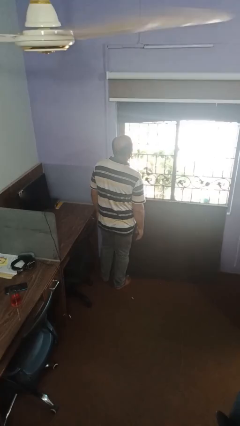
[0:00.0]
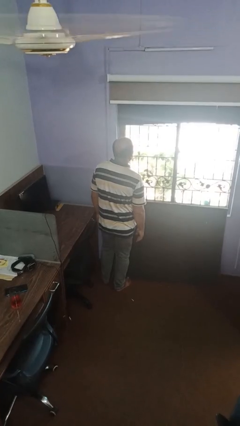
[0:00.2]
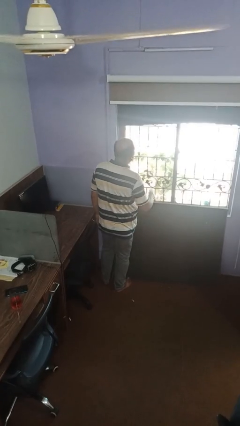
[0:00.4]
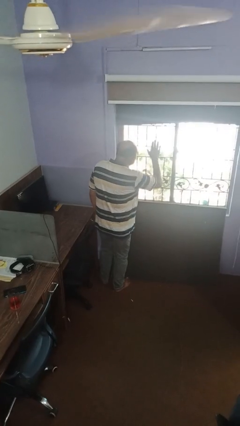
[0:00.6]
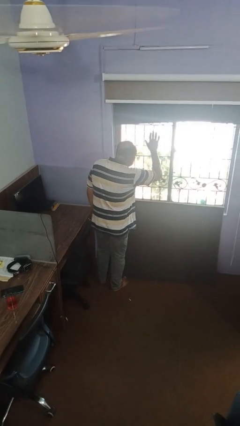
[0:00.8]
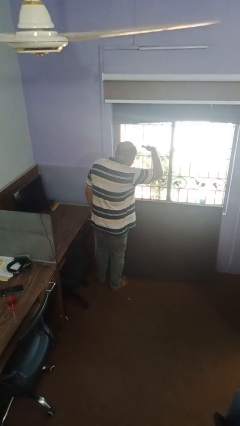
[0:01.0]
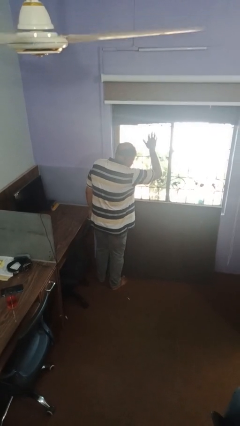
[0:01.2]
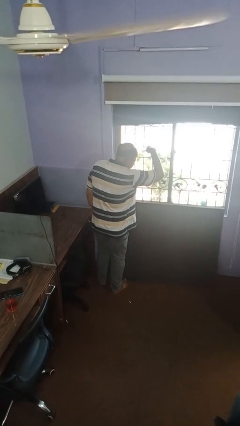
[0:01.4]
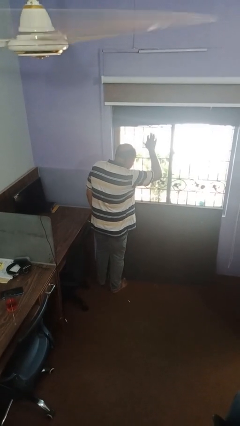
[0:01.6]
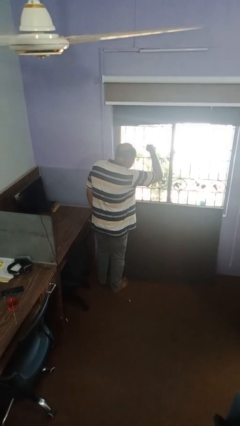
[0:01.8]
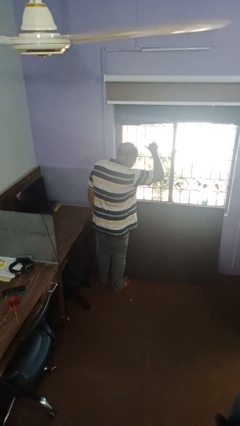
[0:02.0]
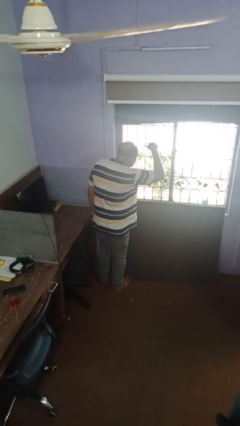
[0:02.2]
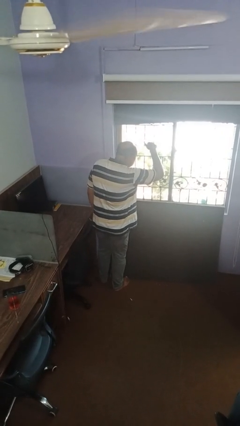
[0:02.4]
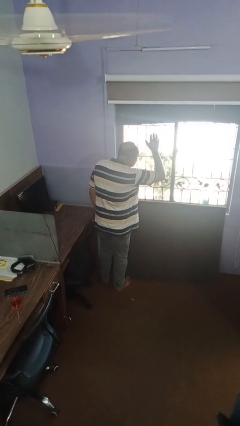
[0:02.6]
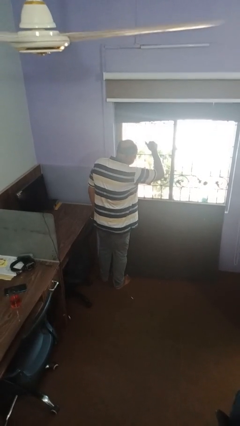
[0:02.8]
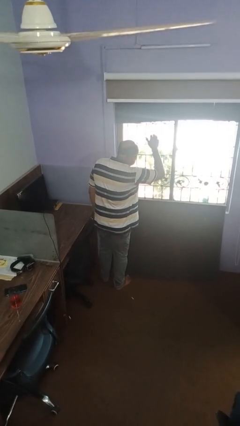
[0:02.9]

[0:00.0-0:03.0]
person gestures come here

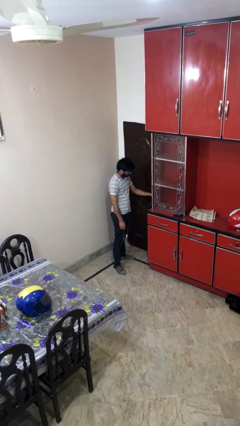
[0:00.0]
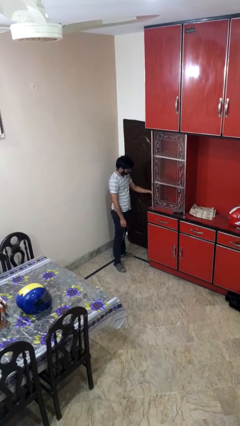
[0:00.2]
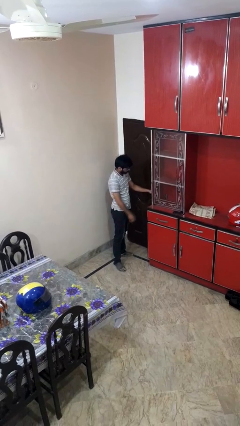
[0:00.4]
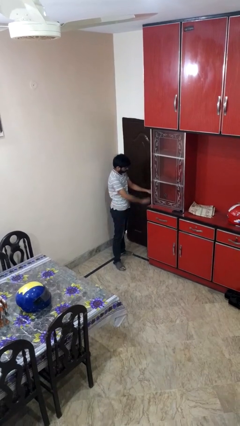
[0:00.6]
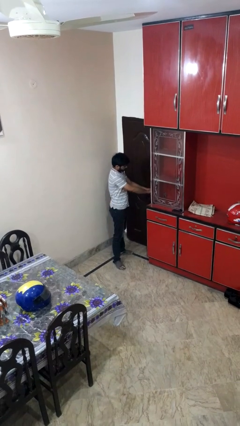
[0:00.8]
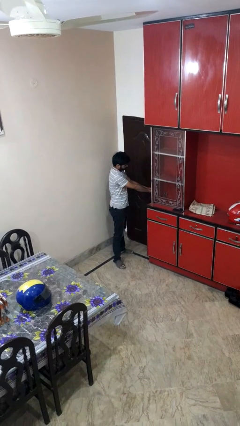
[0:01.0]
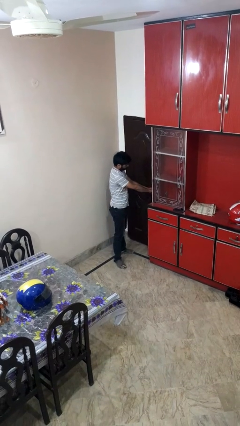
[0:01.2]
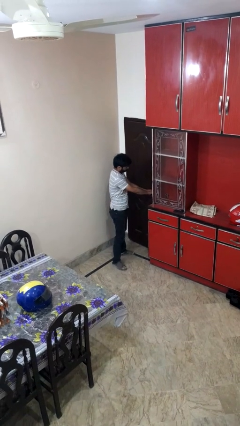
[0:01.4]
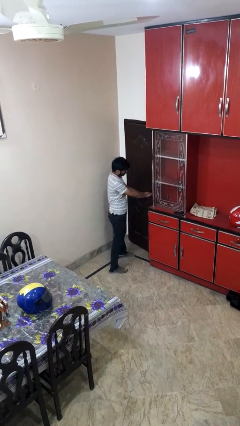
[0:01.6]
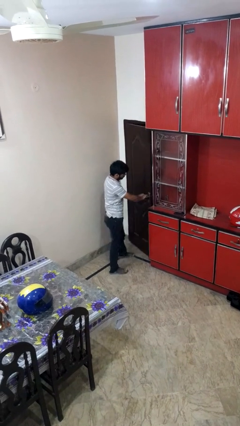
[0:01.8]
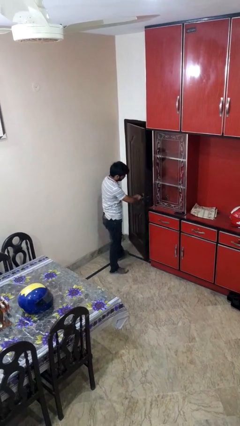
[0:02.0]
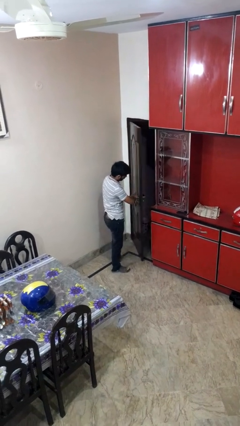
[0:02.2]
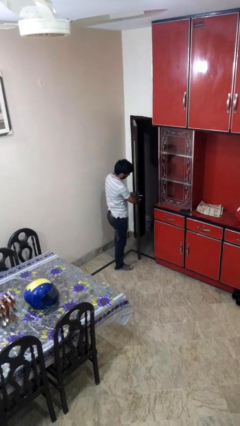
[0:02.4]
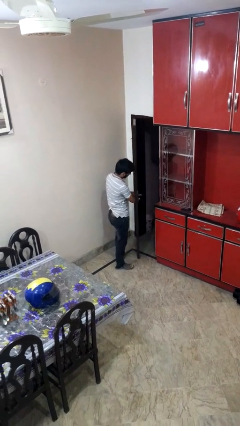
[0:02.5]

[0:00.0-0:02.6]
person opens facility door

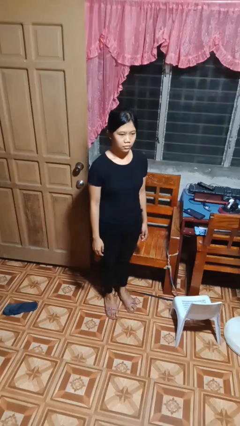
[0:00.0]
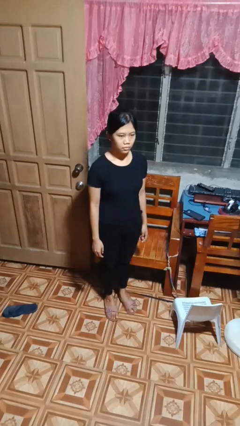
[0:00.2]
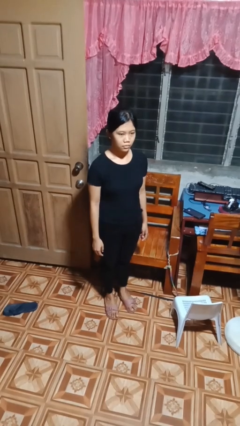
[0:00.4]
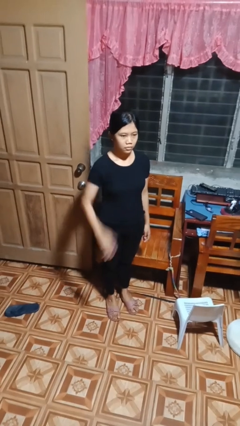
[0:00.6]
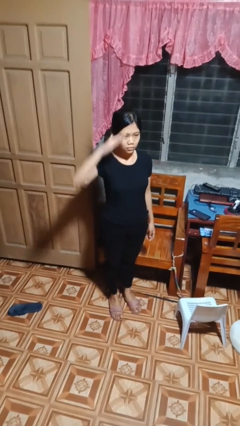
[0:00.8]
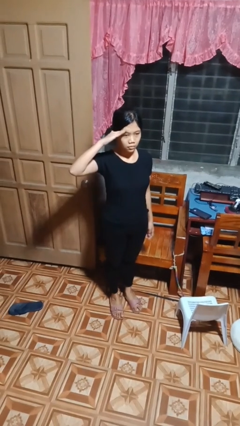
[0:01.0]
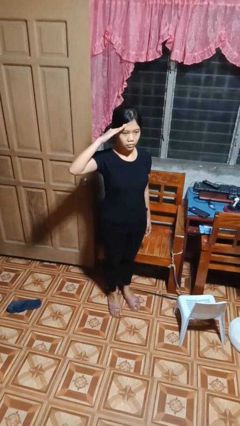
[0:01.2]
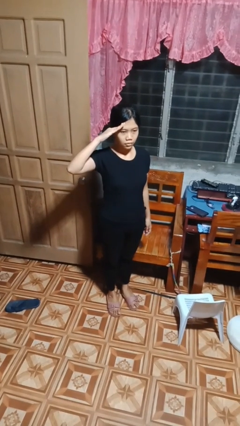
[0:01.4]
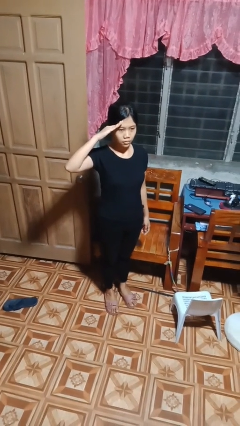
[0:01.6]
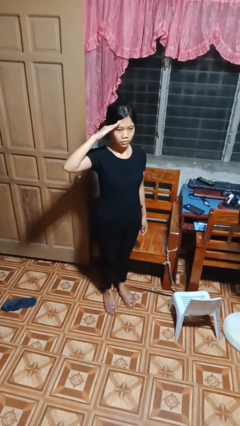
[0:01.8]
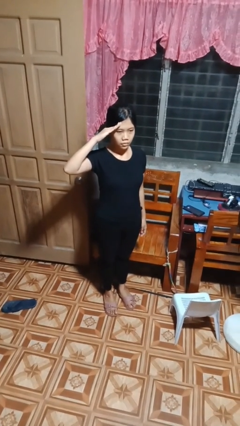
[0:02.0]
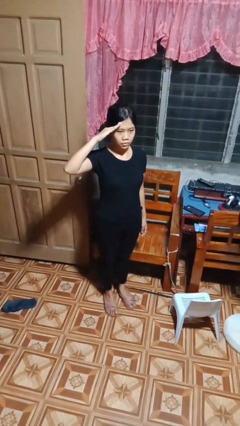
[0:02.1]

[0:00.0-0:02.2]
person salutes

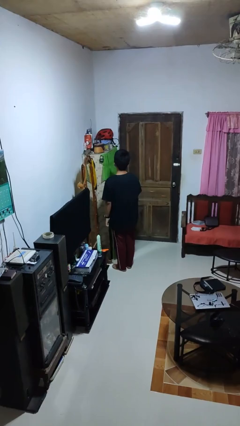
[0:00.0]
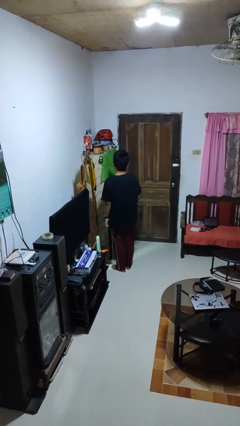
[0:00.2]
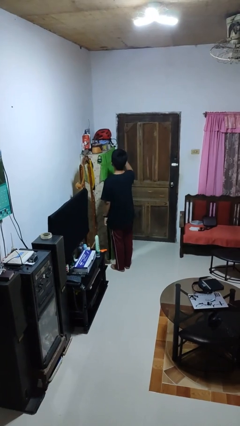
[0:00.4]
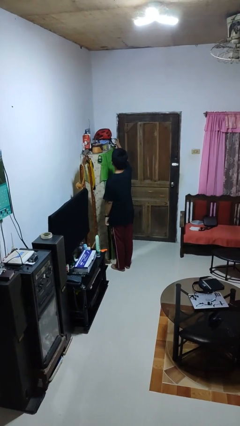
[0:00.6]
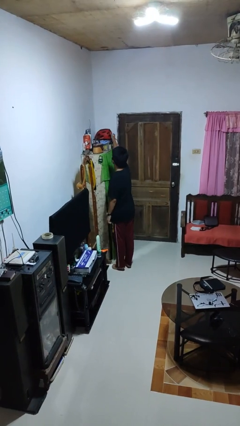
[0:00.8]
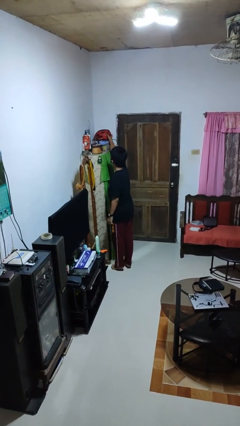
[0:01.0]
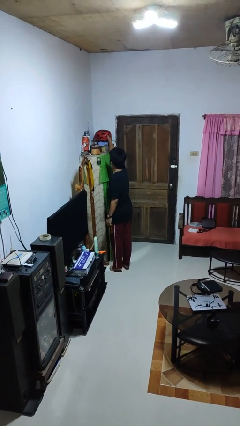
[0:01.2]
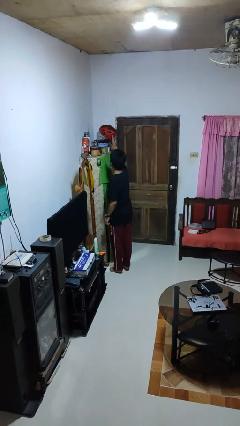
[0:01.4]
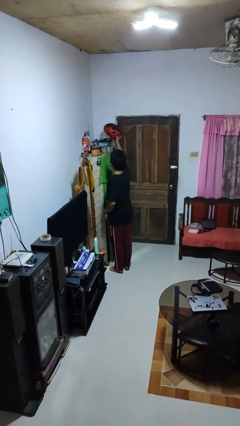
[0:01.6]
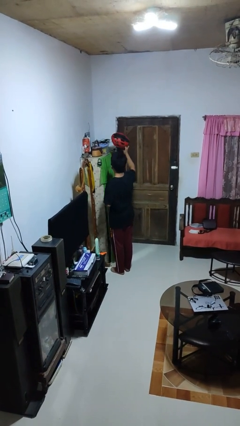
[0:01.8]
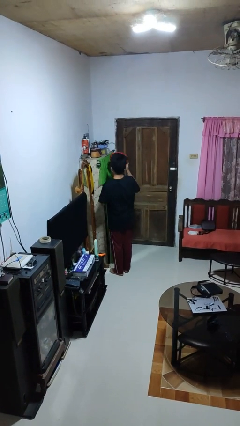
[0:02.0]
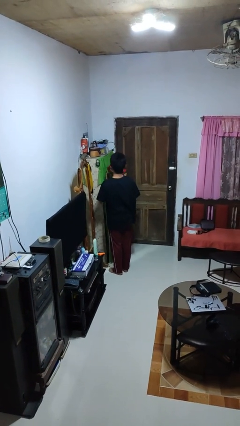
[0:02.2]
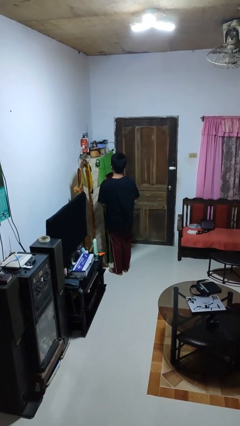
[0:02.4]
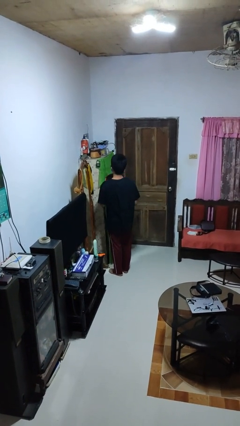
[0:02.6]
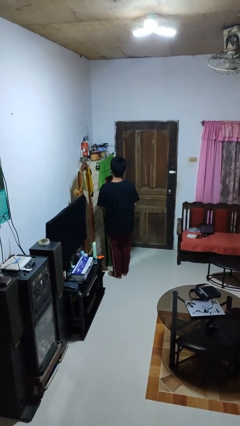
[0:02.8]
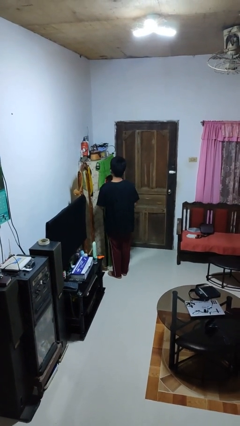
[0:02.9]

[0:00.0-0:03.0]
person picks up object from shelf

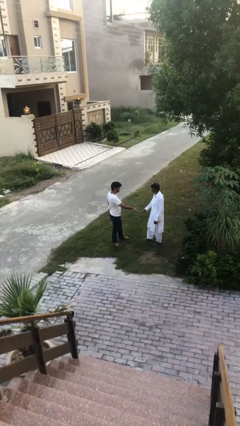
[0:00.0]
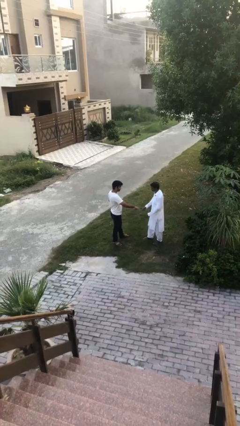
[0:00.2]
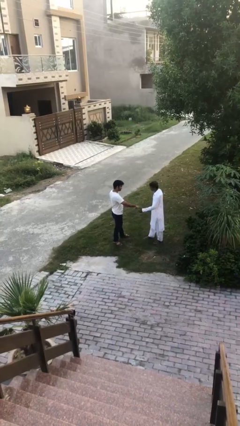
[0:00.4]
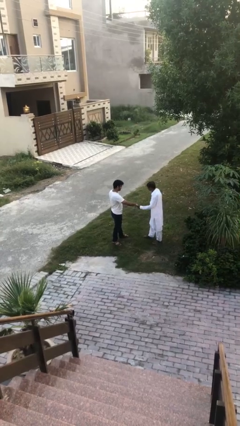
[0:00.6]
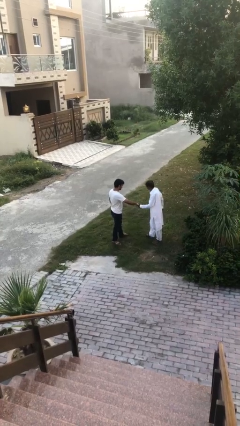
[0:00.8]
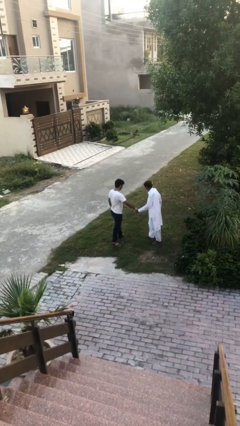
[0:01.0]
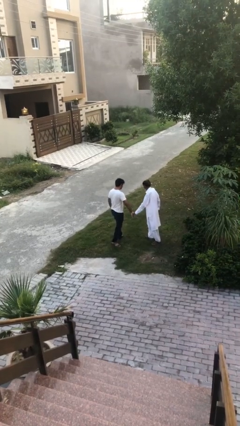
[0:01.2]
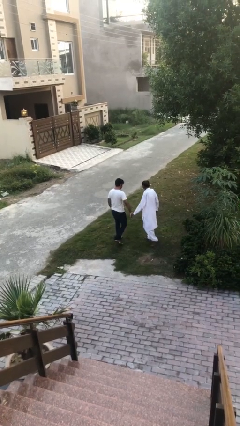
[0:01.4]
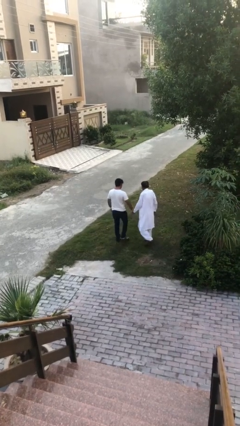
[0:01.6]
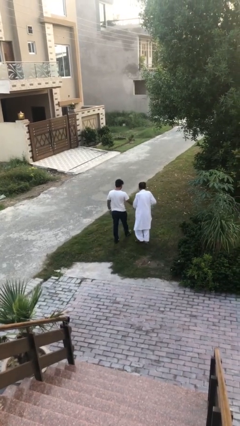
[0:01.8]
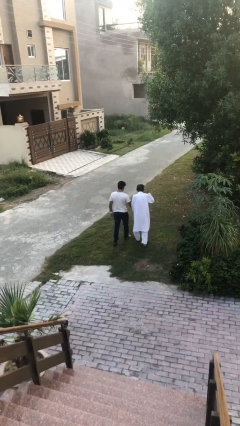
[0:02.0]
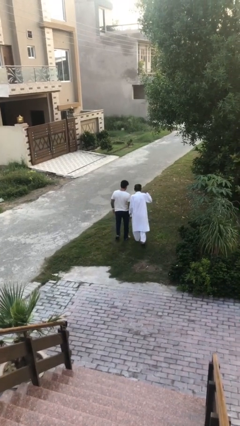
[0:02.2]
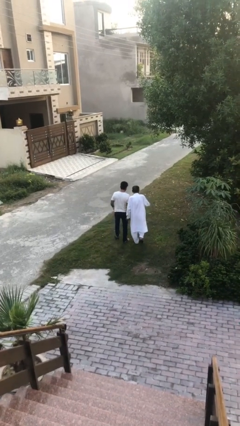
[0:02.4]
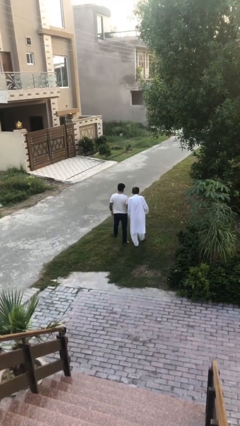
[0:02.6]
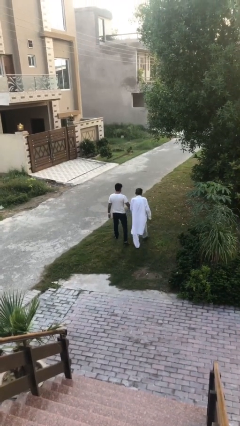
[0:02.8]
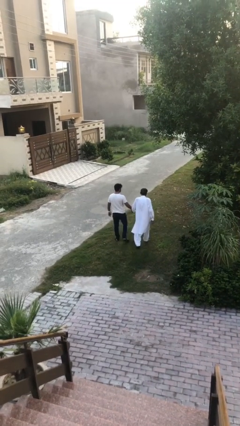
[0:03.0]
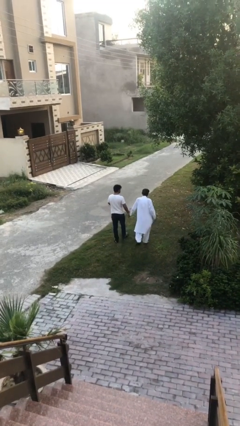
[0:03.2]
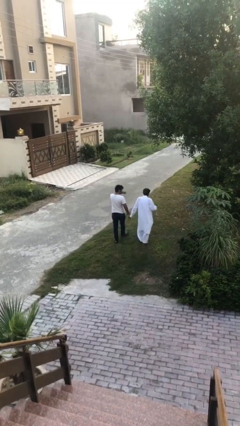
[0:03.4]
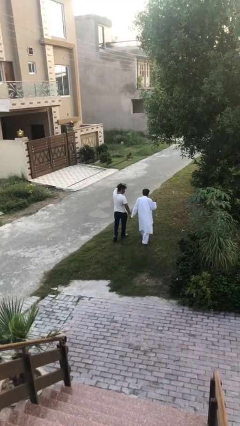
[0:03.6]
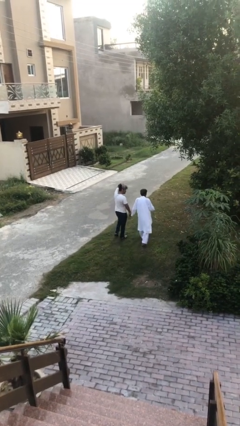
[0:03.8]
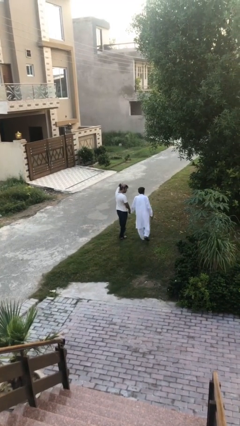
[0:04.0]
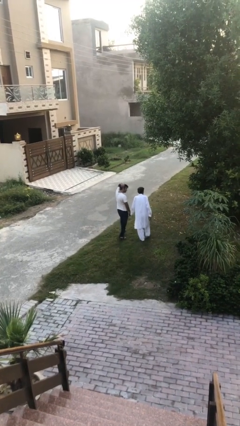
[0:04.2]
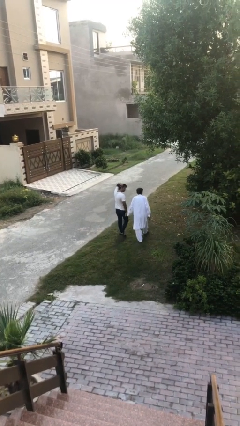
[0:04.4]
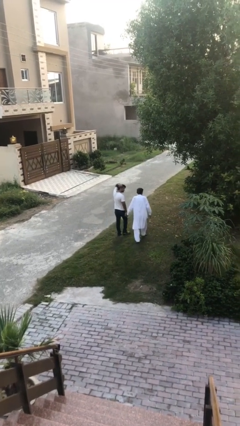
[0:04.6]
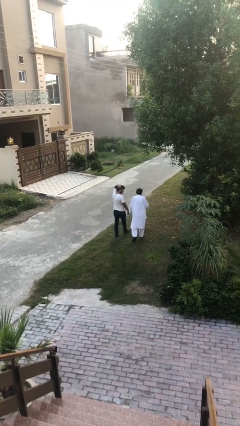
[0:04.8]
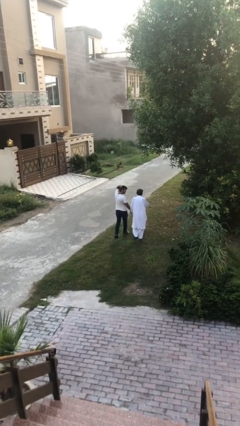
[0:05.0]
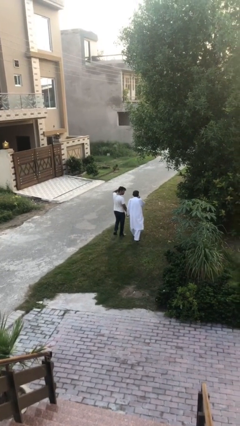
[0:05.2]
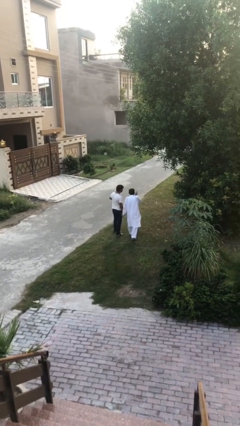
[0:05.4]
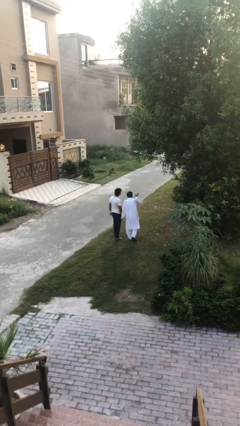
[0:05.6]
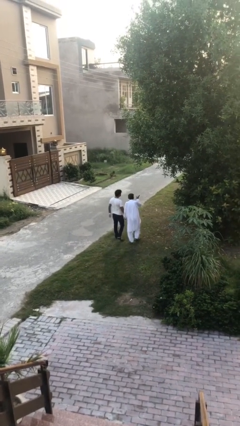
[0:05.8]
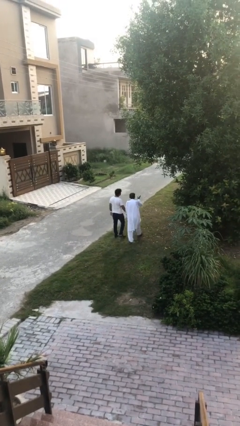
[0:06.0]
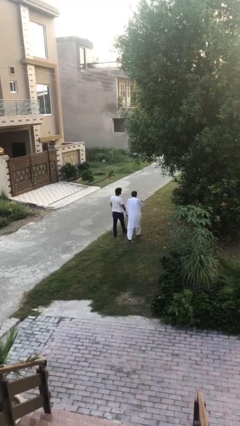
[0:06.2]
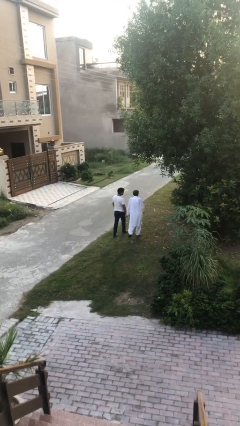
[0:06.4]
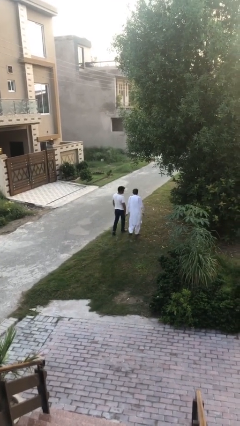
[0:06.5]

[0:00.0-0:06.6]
person holds hand

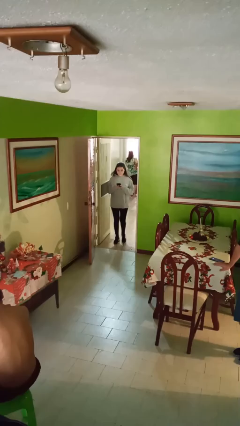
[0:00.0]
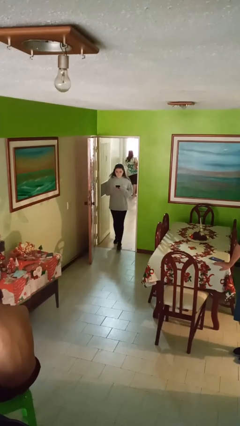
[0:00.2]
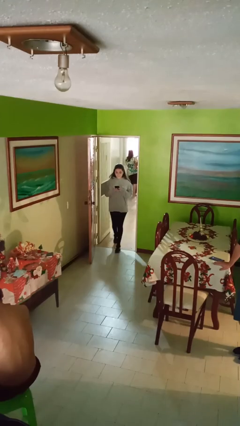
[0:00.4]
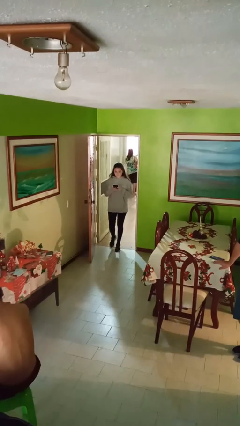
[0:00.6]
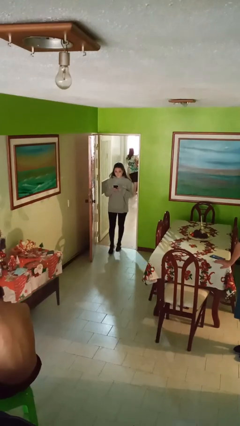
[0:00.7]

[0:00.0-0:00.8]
person enters scene through structure
